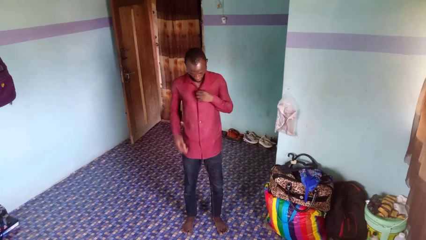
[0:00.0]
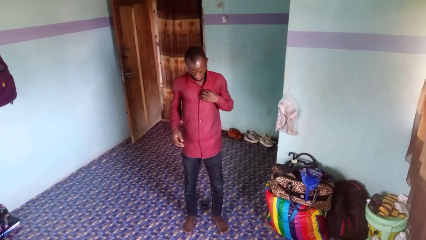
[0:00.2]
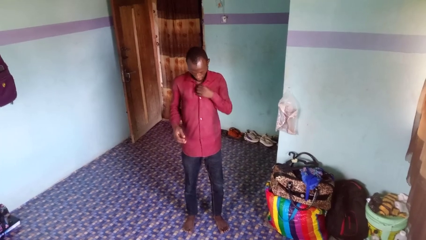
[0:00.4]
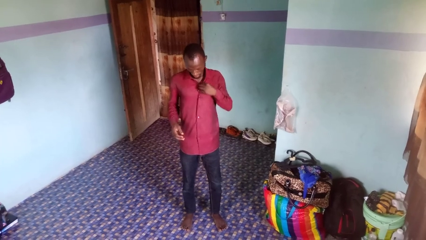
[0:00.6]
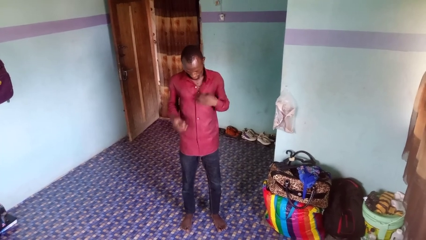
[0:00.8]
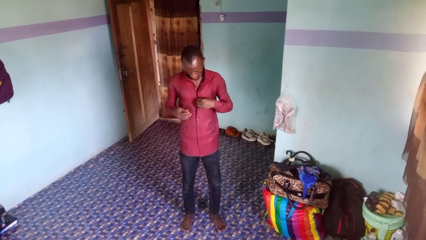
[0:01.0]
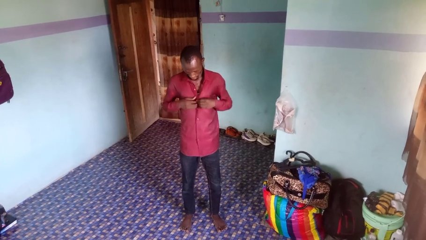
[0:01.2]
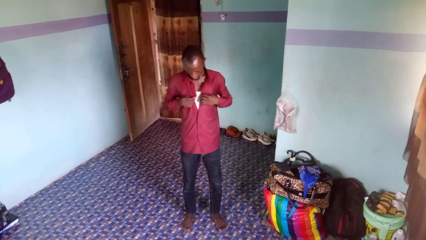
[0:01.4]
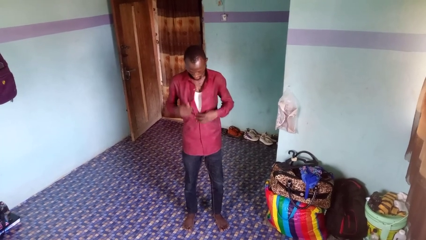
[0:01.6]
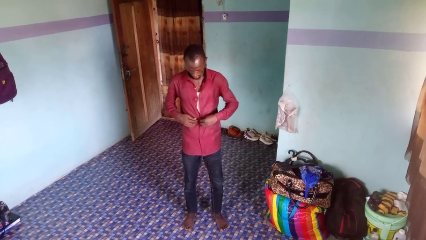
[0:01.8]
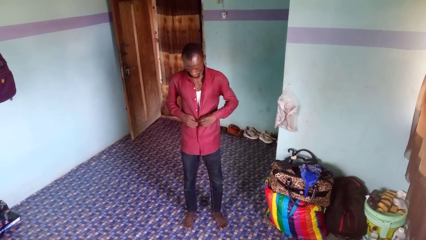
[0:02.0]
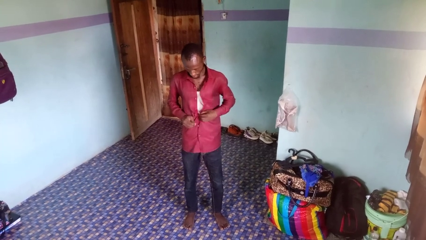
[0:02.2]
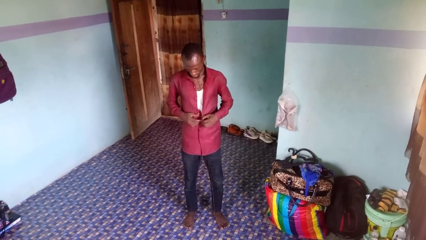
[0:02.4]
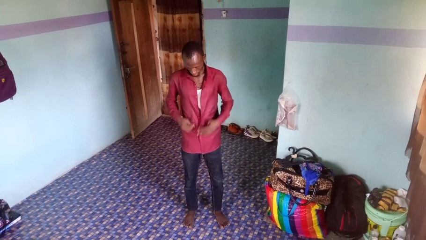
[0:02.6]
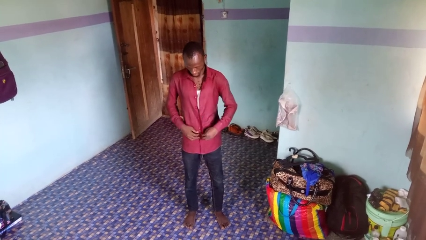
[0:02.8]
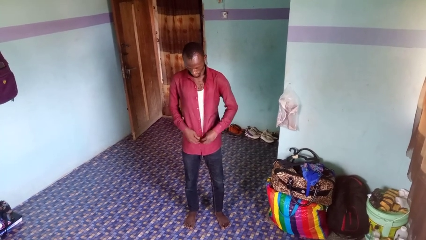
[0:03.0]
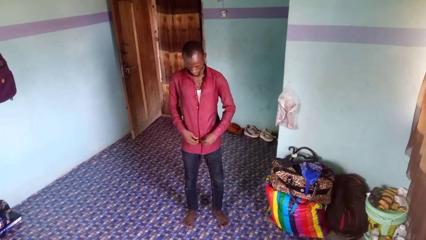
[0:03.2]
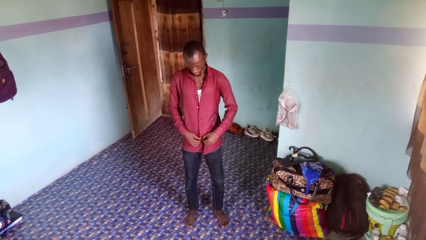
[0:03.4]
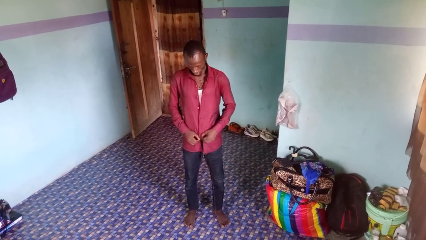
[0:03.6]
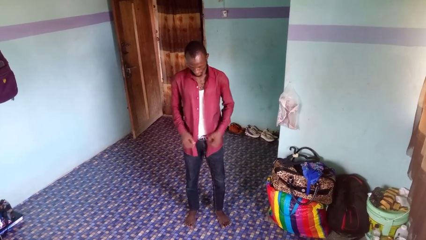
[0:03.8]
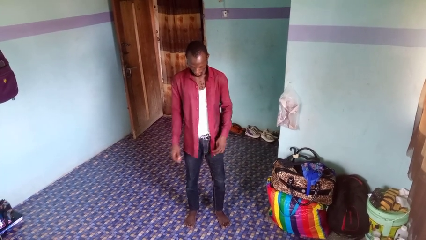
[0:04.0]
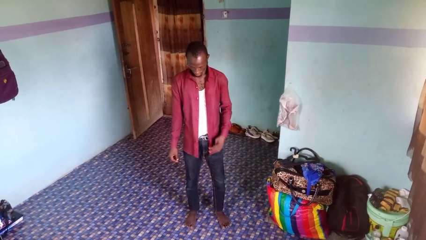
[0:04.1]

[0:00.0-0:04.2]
person unbuttons shirt

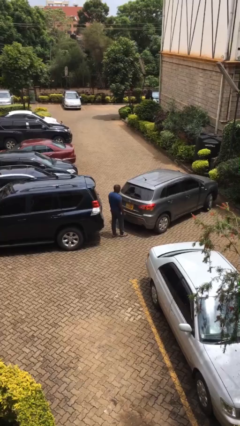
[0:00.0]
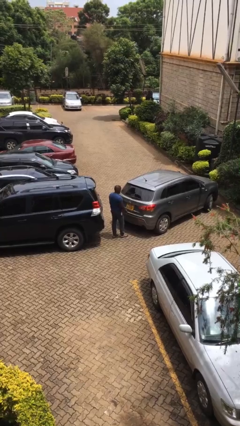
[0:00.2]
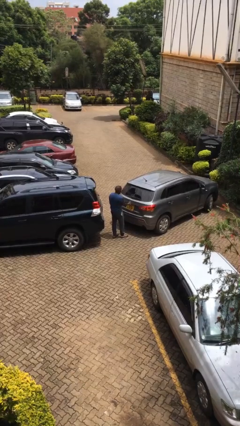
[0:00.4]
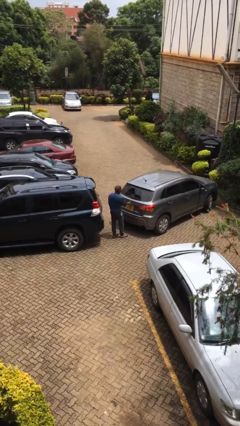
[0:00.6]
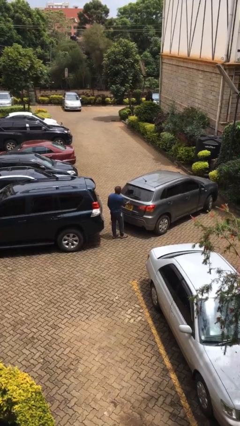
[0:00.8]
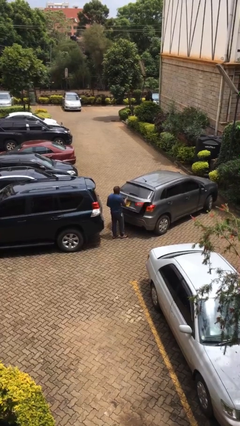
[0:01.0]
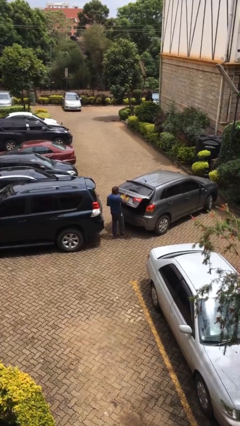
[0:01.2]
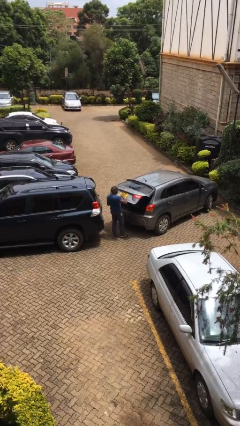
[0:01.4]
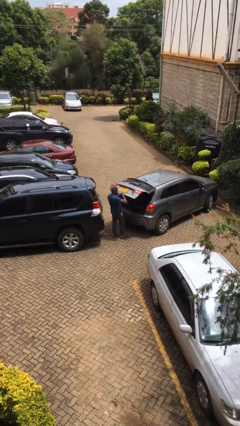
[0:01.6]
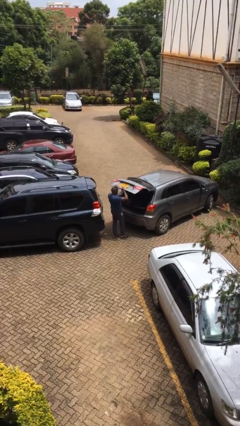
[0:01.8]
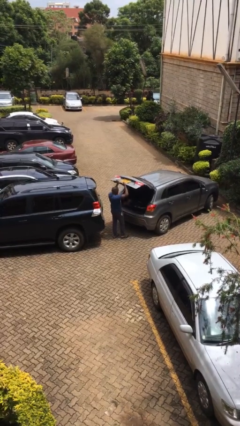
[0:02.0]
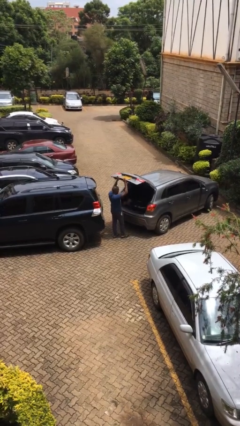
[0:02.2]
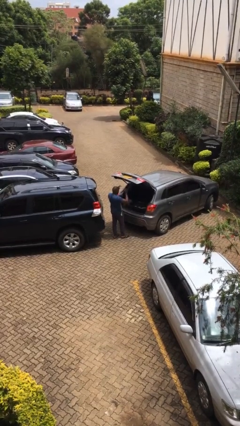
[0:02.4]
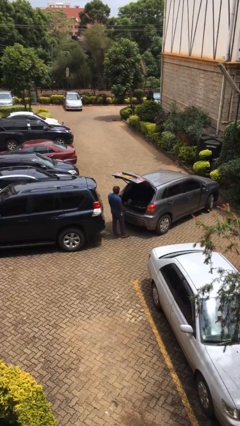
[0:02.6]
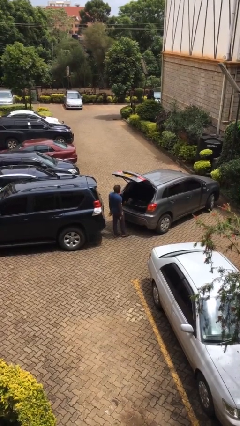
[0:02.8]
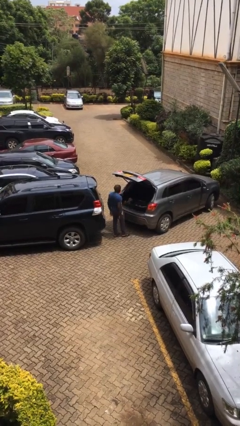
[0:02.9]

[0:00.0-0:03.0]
person opens car trunk

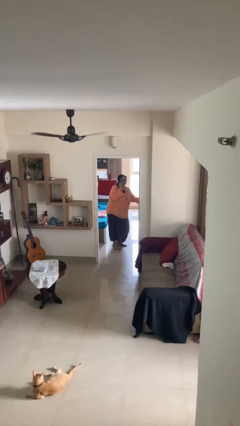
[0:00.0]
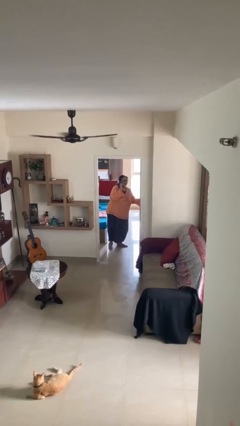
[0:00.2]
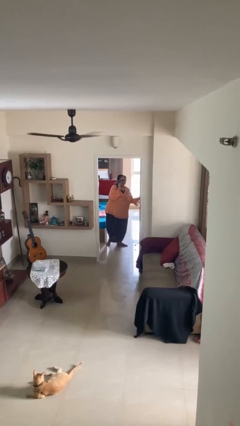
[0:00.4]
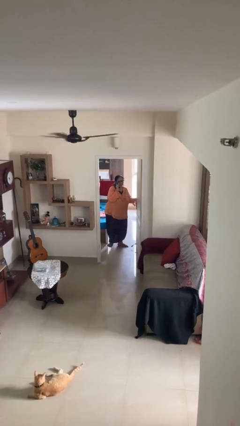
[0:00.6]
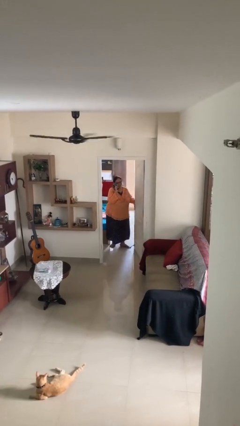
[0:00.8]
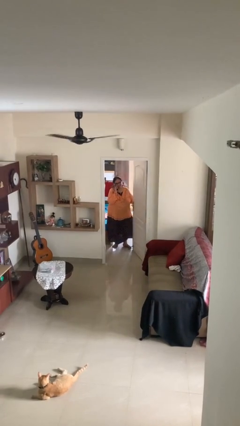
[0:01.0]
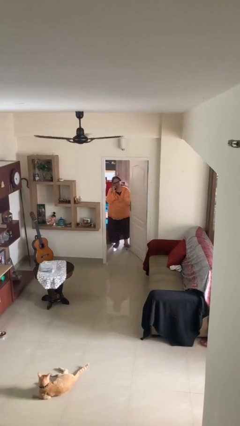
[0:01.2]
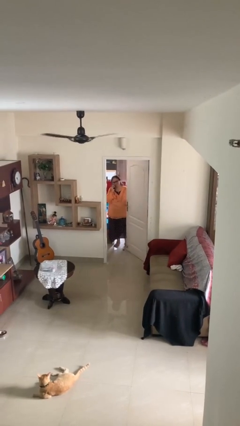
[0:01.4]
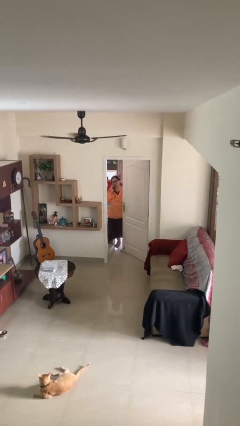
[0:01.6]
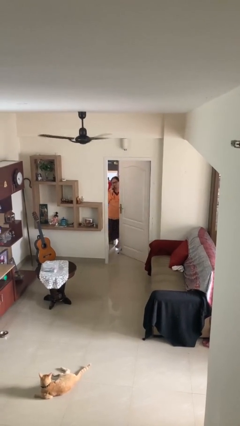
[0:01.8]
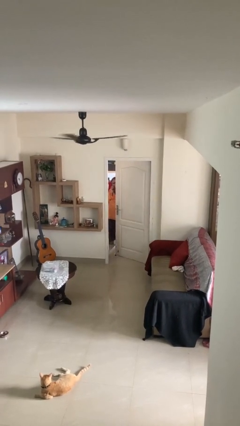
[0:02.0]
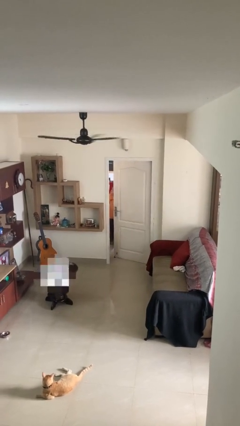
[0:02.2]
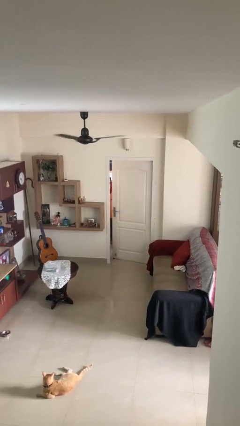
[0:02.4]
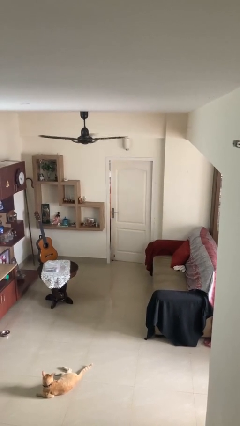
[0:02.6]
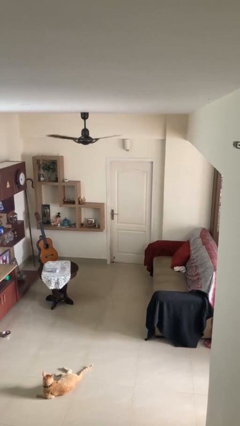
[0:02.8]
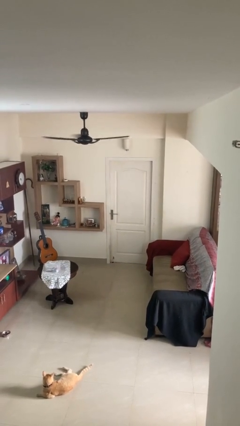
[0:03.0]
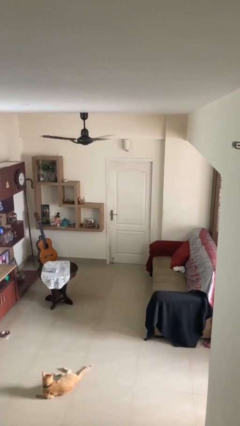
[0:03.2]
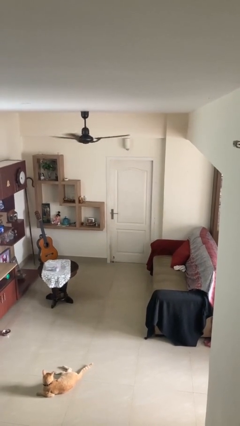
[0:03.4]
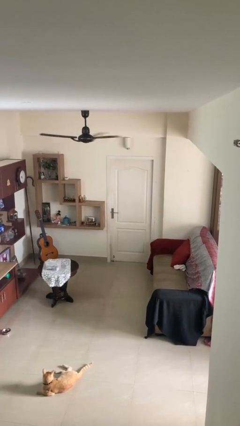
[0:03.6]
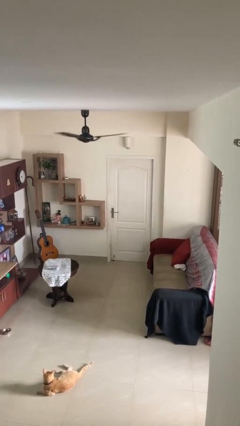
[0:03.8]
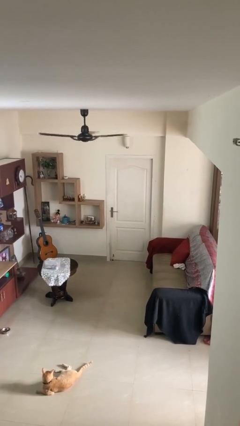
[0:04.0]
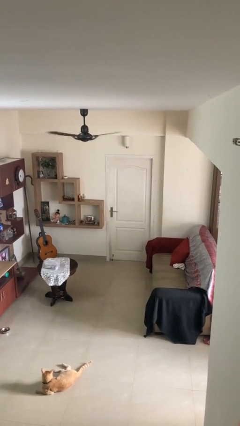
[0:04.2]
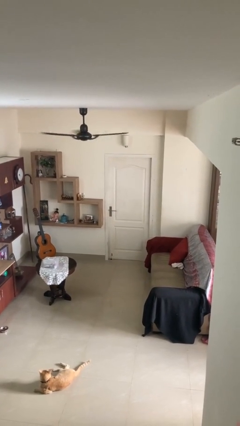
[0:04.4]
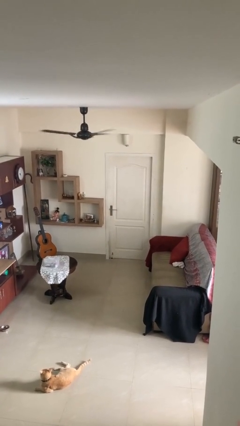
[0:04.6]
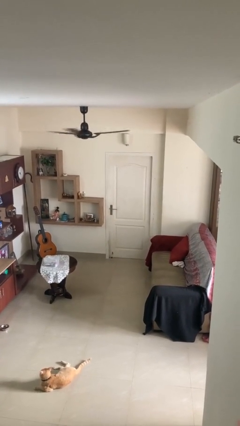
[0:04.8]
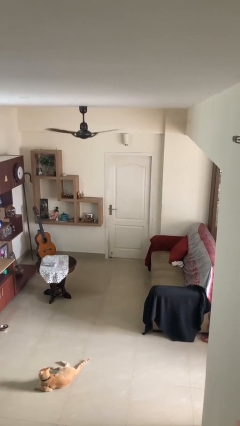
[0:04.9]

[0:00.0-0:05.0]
person closes facility door

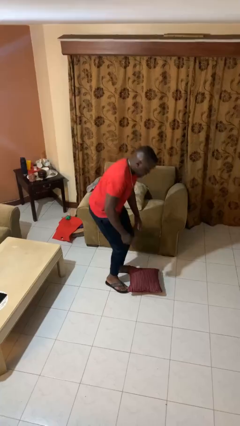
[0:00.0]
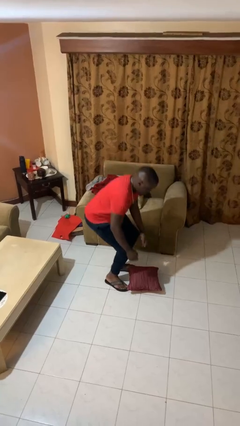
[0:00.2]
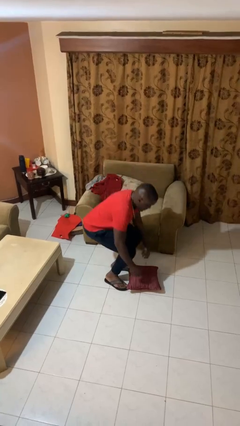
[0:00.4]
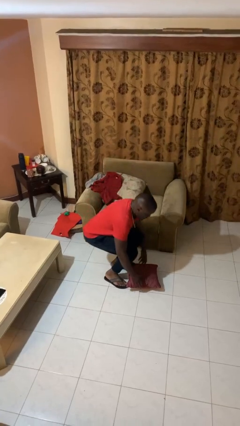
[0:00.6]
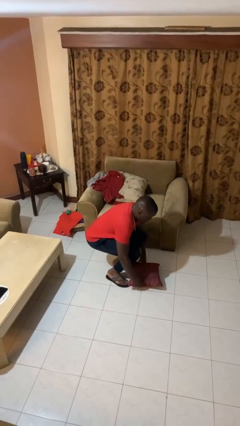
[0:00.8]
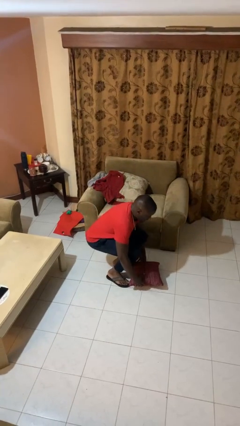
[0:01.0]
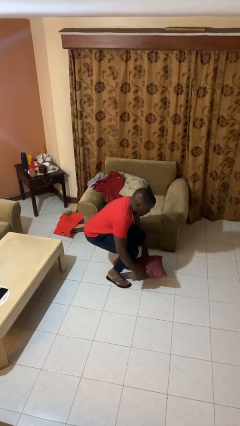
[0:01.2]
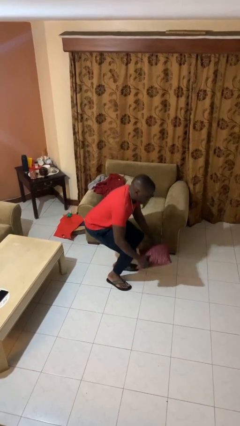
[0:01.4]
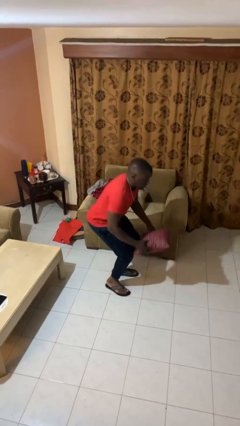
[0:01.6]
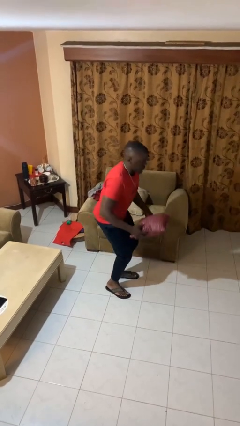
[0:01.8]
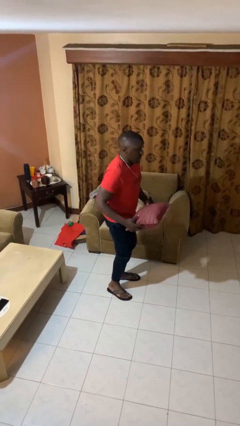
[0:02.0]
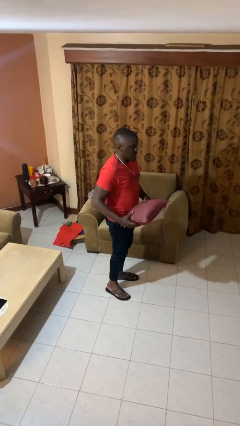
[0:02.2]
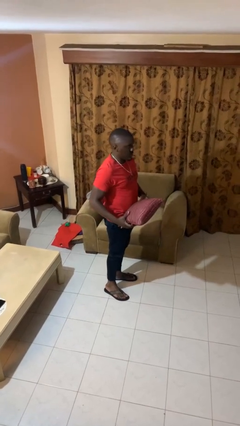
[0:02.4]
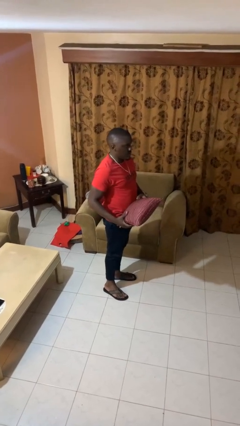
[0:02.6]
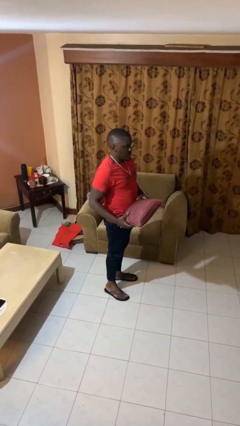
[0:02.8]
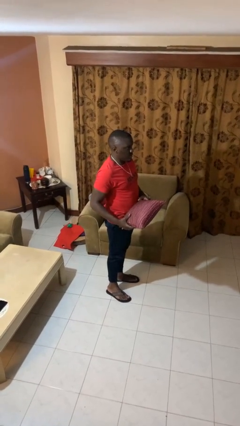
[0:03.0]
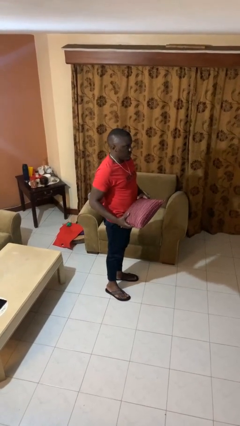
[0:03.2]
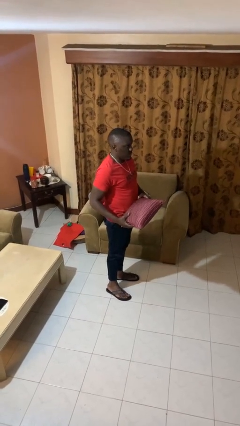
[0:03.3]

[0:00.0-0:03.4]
person picks up object from floor

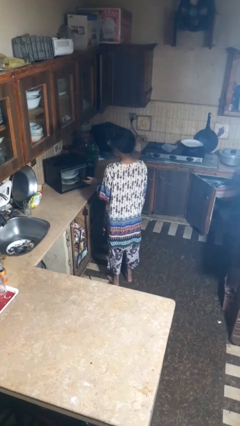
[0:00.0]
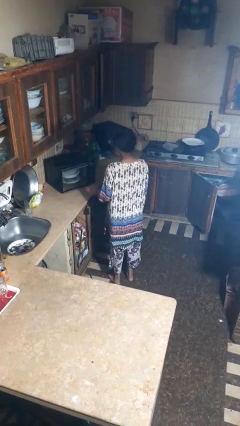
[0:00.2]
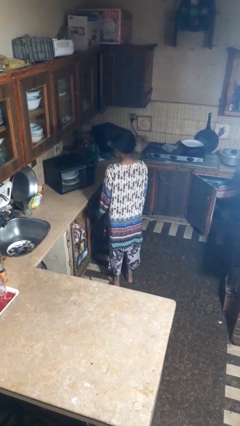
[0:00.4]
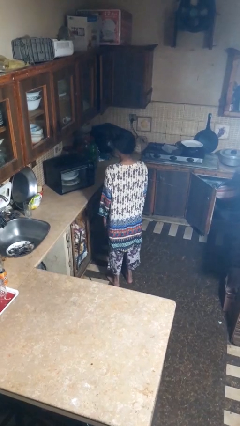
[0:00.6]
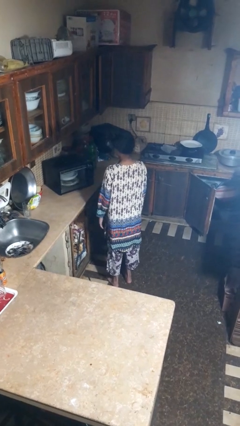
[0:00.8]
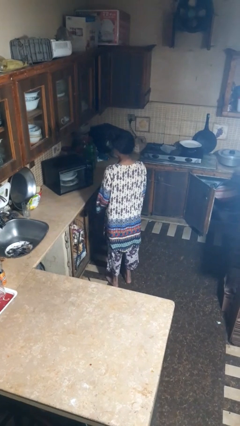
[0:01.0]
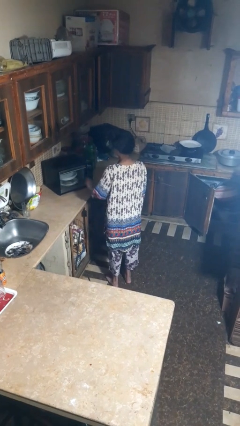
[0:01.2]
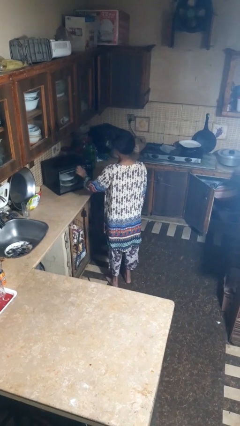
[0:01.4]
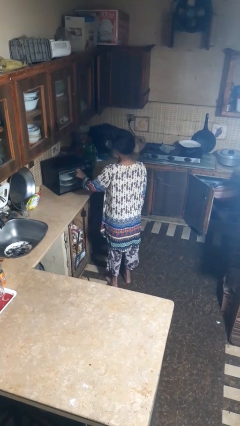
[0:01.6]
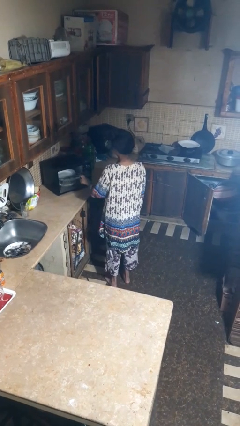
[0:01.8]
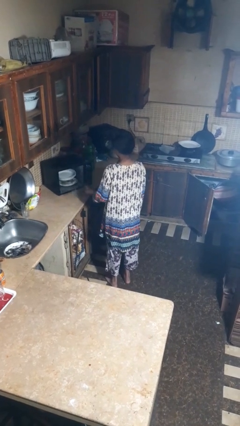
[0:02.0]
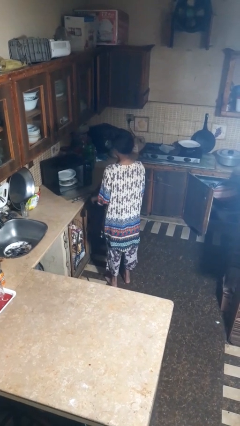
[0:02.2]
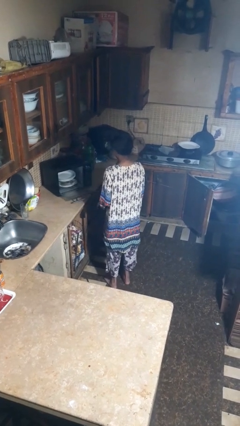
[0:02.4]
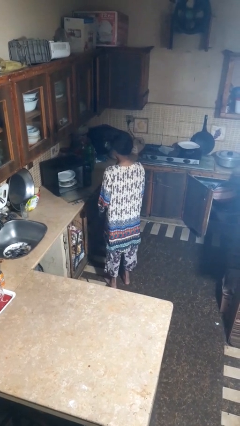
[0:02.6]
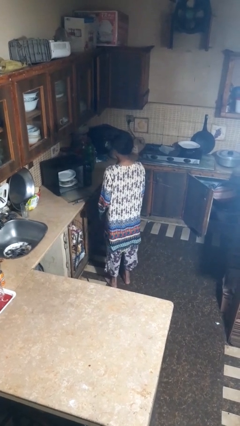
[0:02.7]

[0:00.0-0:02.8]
person opens dishwasher
